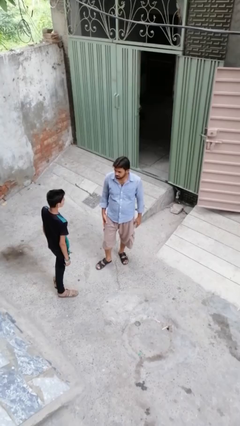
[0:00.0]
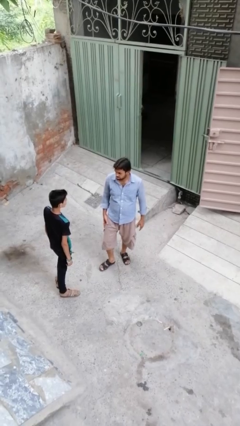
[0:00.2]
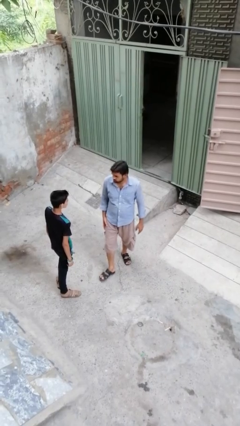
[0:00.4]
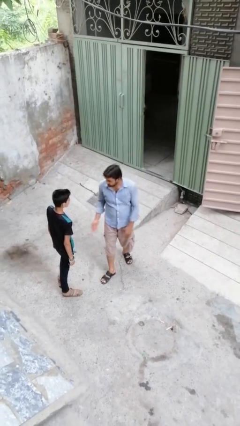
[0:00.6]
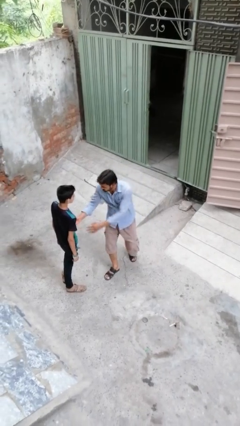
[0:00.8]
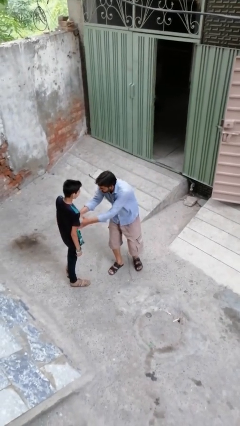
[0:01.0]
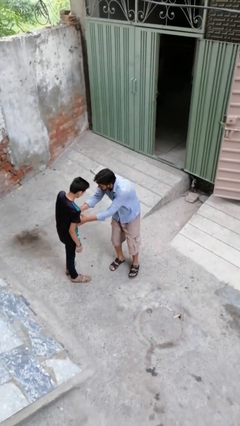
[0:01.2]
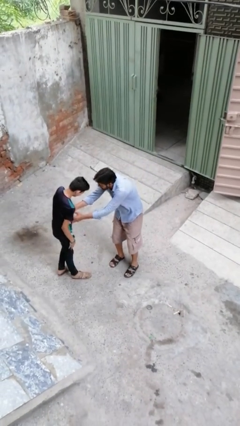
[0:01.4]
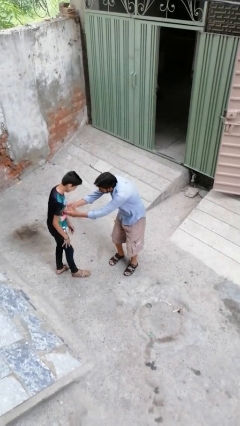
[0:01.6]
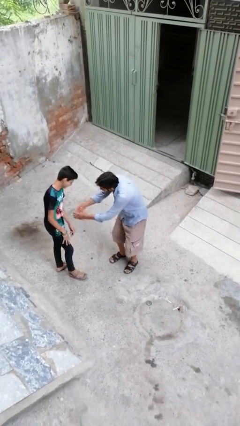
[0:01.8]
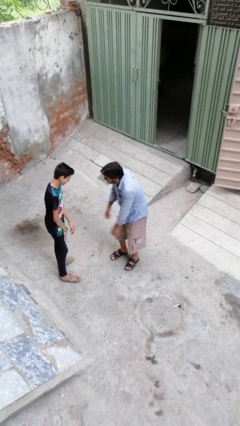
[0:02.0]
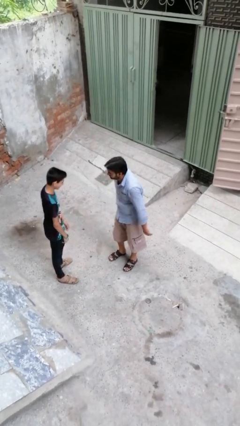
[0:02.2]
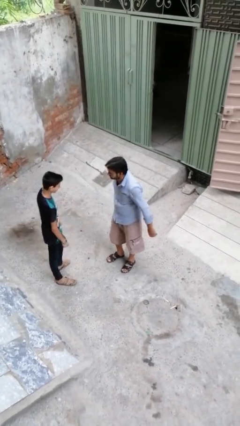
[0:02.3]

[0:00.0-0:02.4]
person tickles person

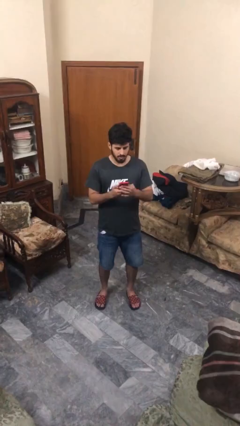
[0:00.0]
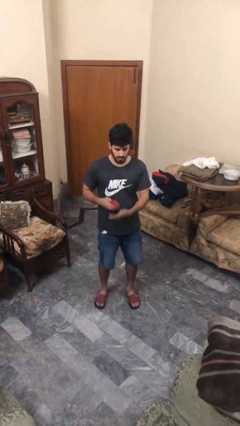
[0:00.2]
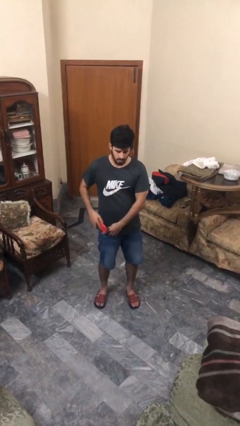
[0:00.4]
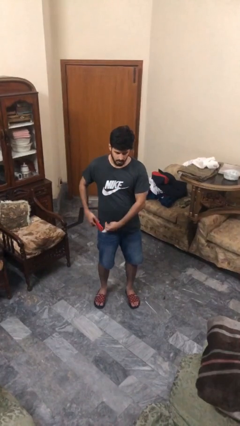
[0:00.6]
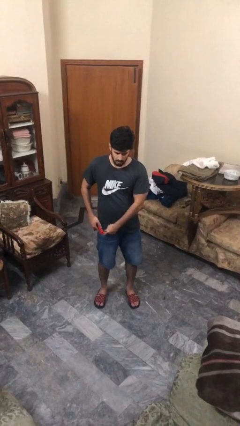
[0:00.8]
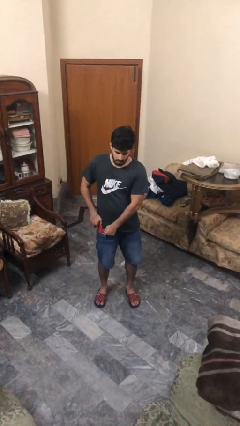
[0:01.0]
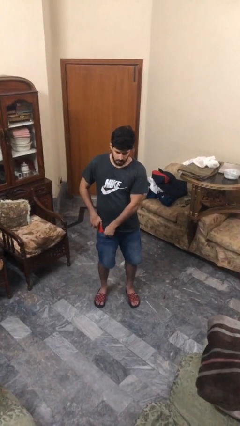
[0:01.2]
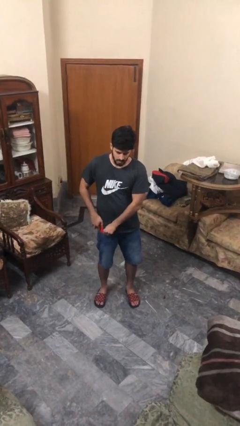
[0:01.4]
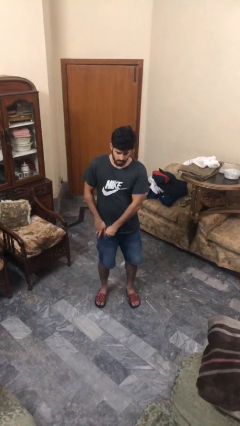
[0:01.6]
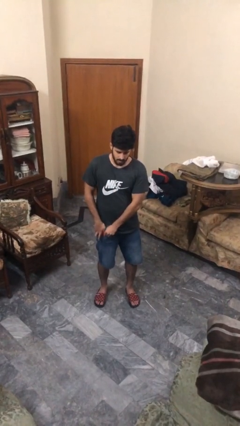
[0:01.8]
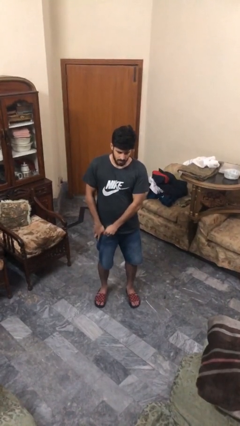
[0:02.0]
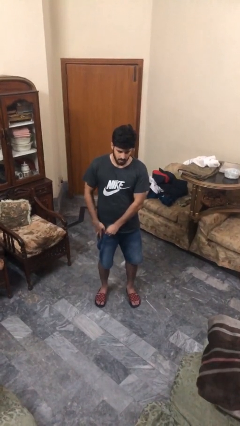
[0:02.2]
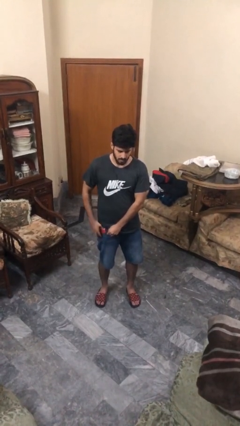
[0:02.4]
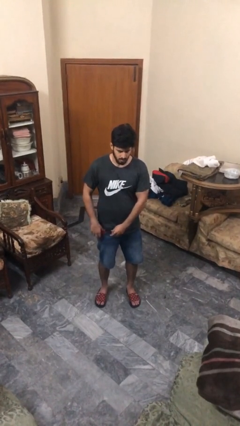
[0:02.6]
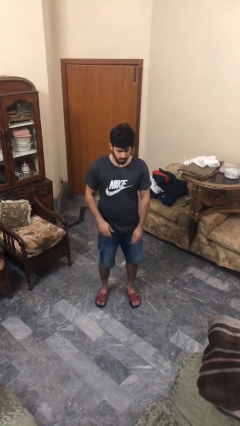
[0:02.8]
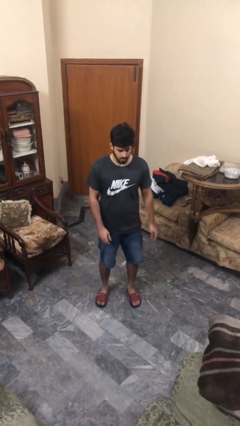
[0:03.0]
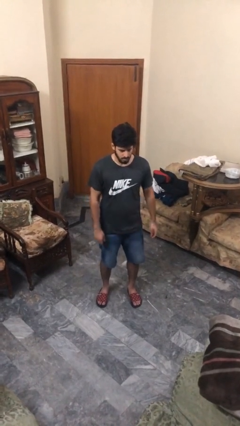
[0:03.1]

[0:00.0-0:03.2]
person puts phone into pocket

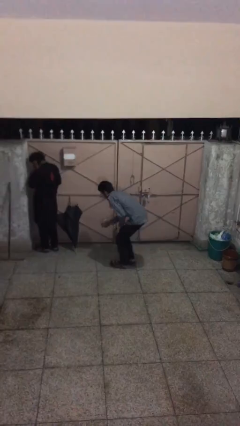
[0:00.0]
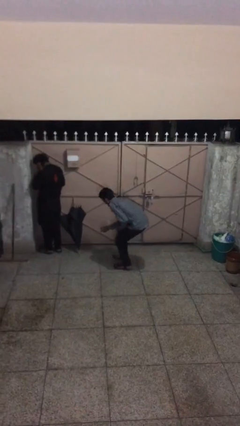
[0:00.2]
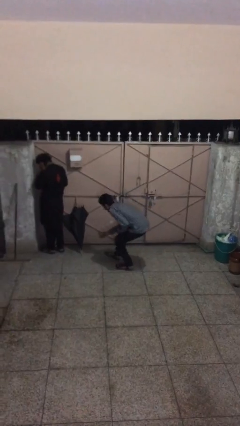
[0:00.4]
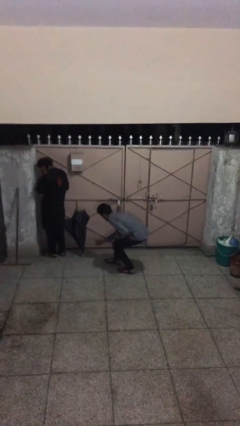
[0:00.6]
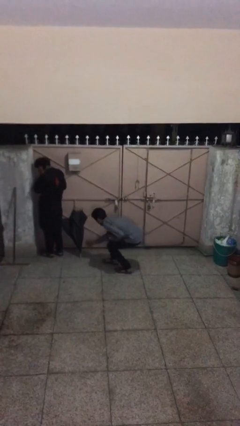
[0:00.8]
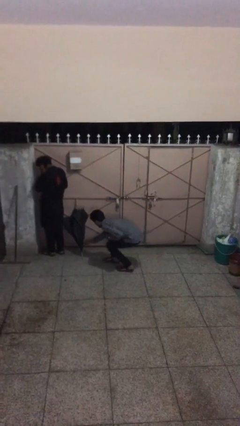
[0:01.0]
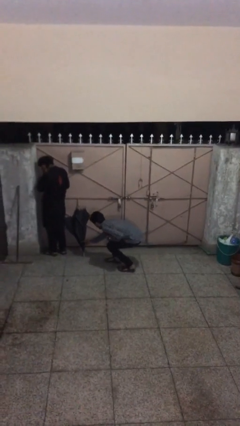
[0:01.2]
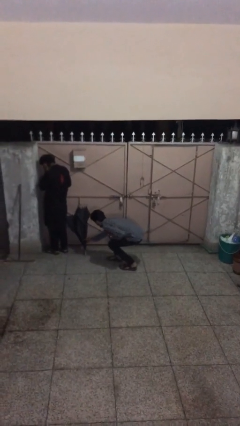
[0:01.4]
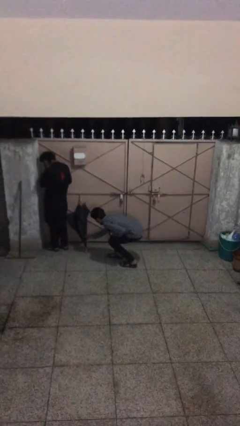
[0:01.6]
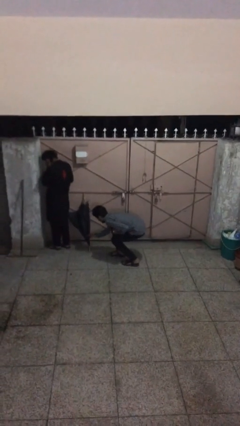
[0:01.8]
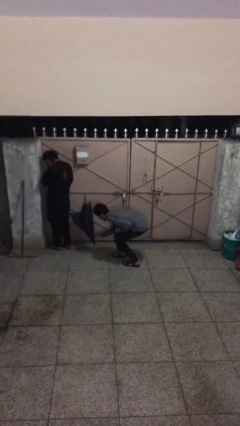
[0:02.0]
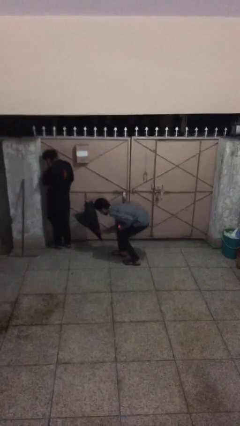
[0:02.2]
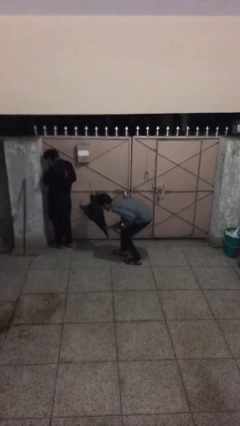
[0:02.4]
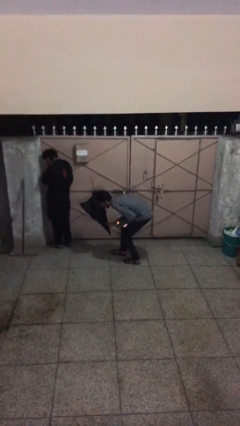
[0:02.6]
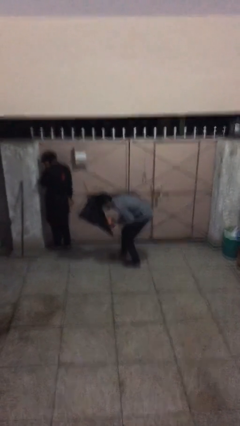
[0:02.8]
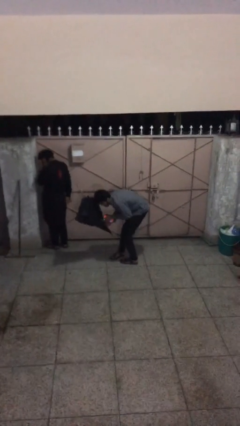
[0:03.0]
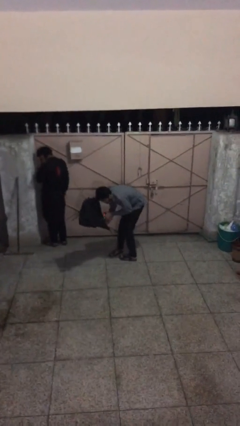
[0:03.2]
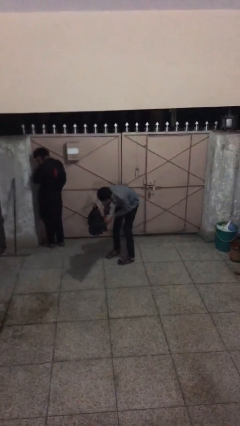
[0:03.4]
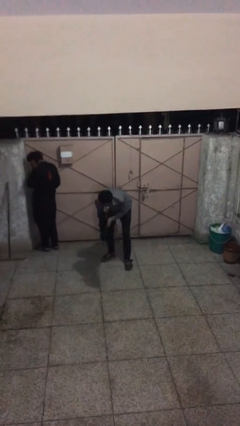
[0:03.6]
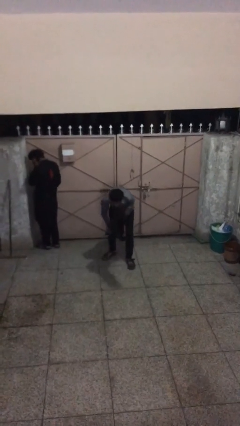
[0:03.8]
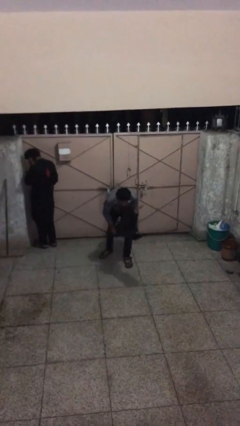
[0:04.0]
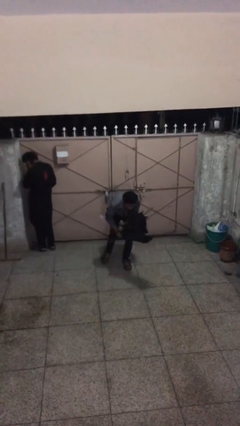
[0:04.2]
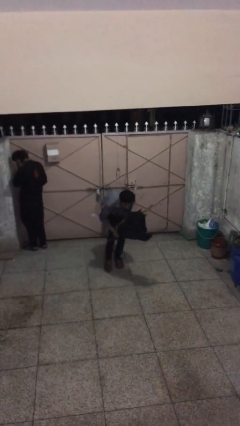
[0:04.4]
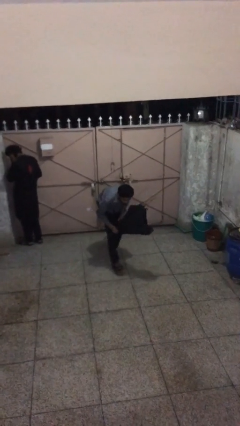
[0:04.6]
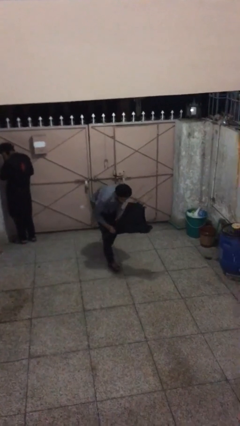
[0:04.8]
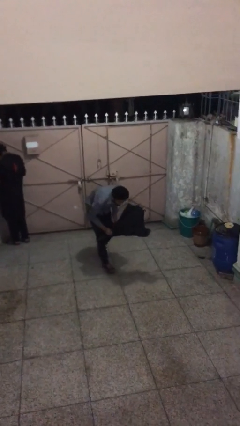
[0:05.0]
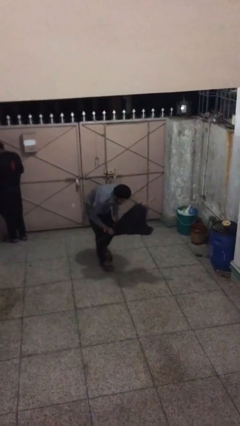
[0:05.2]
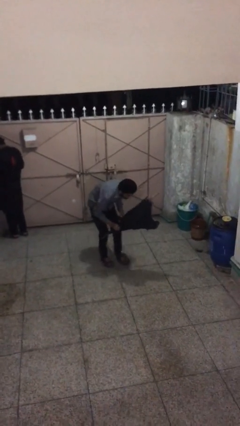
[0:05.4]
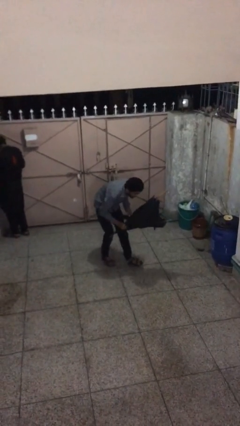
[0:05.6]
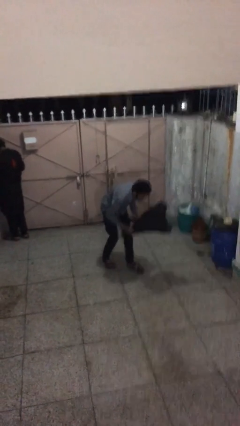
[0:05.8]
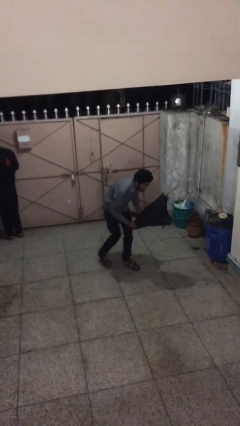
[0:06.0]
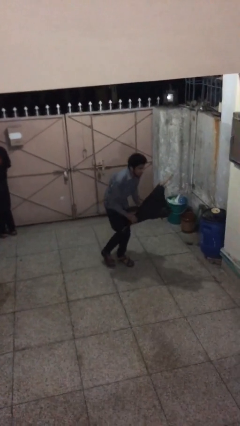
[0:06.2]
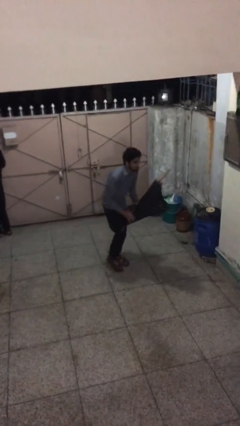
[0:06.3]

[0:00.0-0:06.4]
person steals object from person

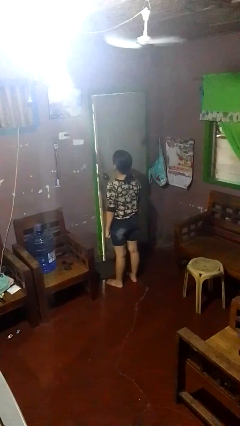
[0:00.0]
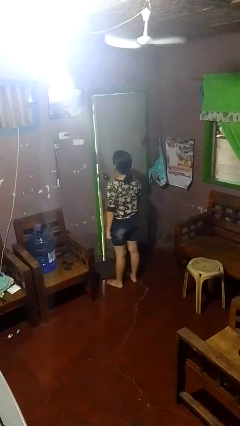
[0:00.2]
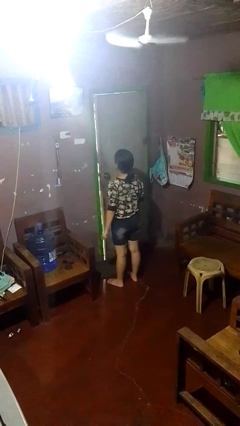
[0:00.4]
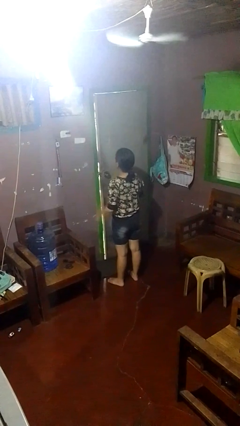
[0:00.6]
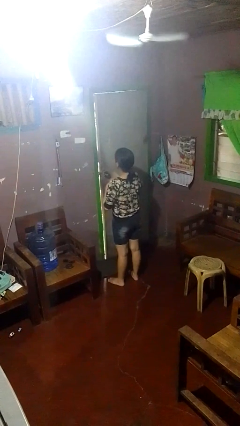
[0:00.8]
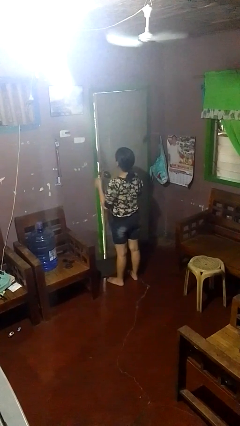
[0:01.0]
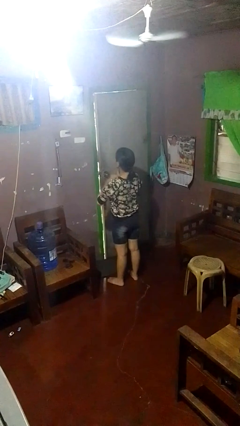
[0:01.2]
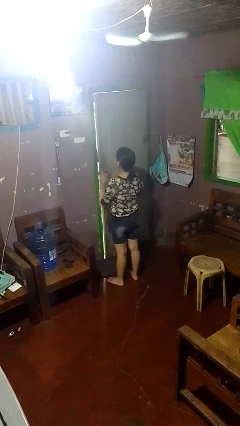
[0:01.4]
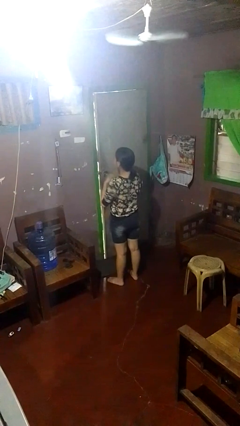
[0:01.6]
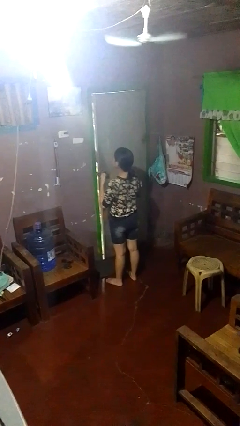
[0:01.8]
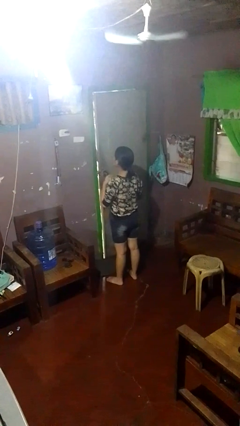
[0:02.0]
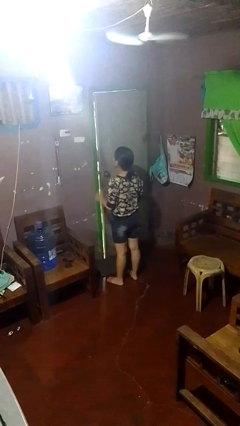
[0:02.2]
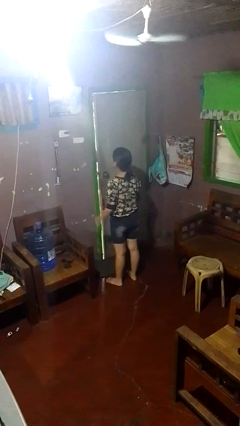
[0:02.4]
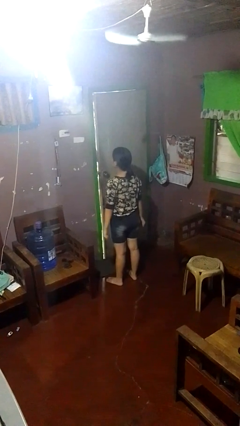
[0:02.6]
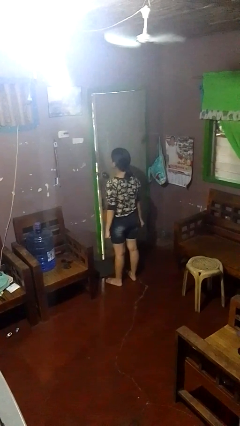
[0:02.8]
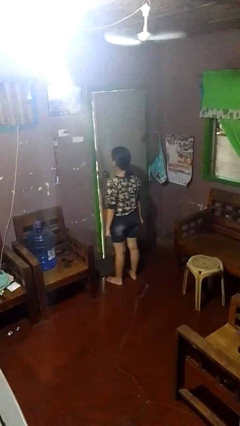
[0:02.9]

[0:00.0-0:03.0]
person drums on chest

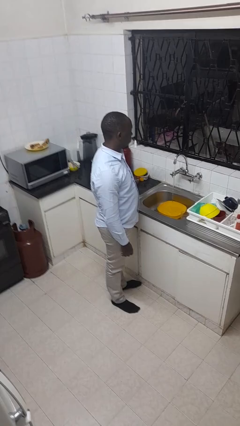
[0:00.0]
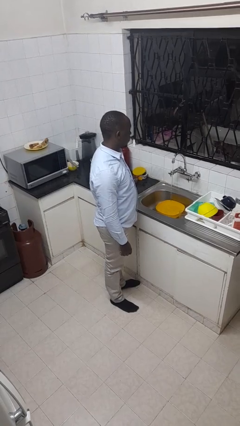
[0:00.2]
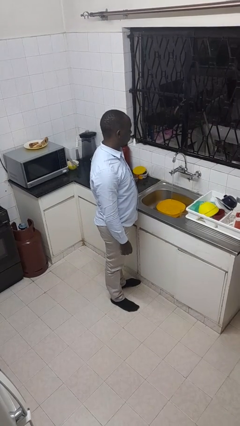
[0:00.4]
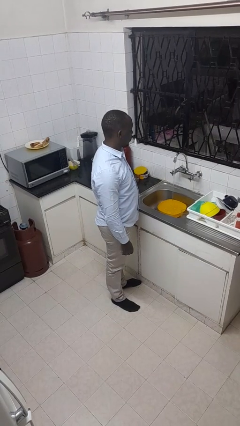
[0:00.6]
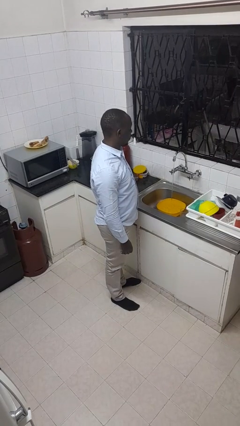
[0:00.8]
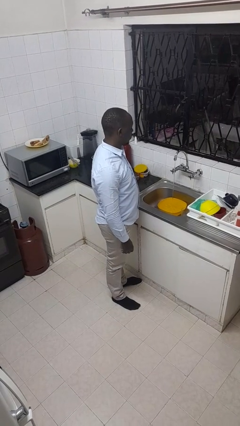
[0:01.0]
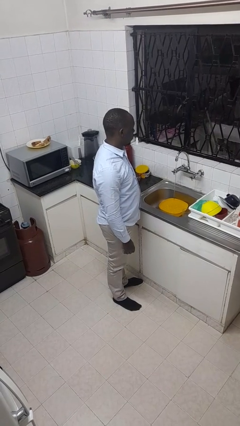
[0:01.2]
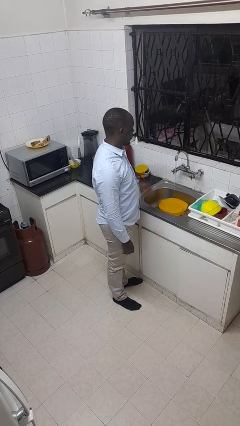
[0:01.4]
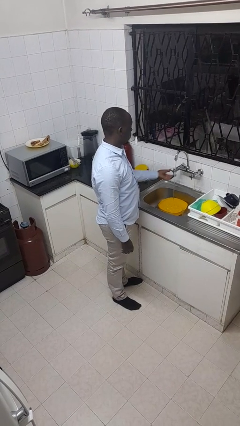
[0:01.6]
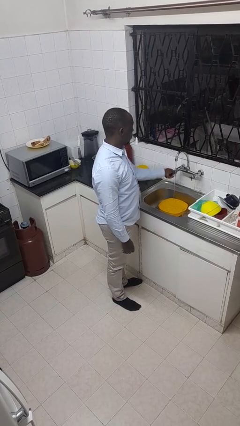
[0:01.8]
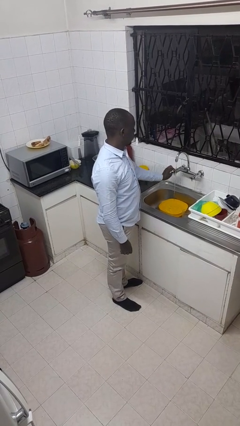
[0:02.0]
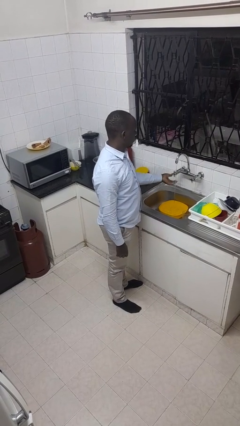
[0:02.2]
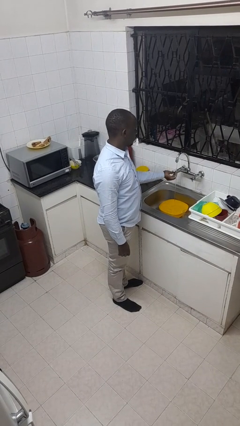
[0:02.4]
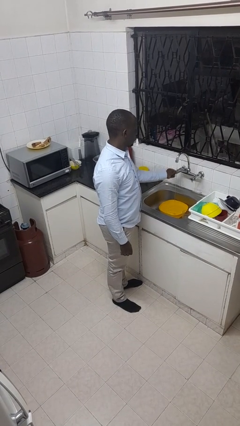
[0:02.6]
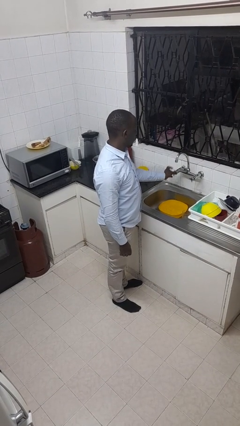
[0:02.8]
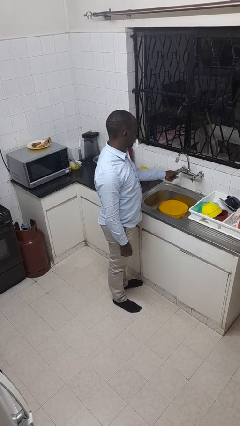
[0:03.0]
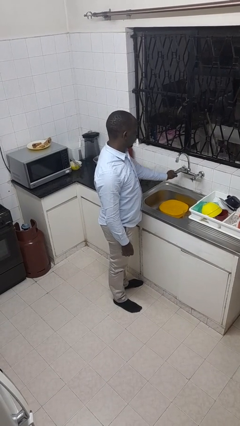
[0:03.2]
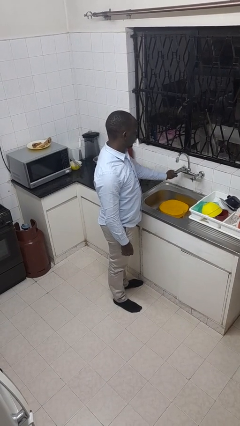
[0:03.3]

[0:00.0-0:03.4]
person turns off faucet
